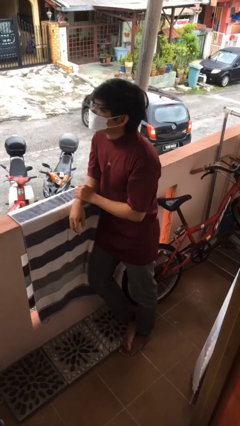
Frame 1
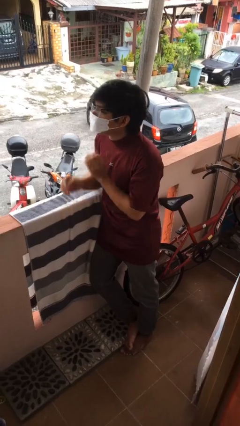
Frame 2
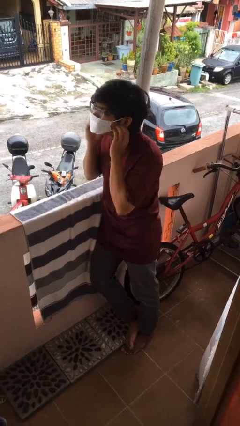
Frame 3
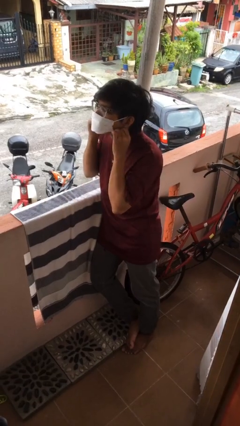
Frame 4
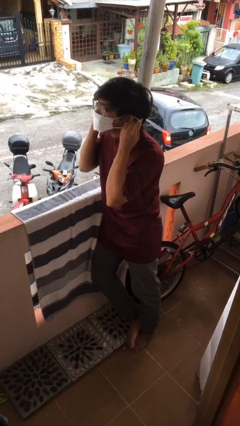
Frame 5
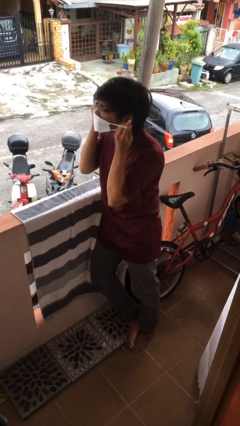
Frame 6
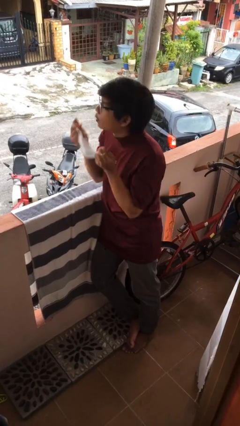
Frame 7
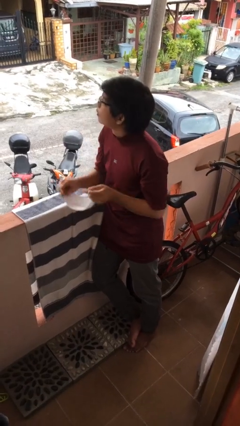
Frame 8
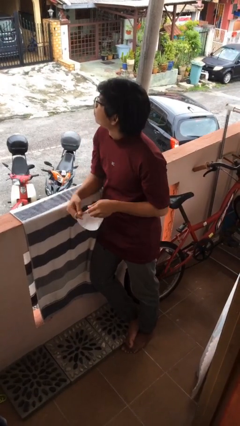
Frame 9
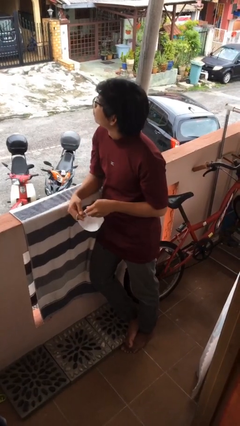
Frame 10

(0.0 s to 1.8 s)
person takes off facemask

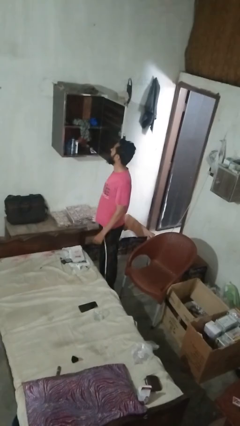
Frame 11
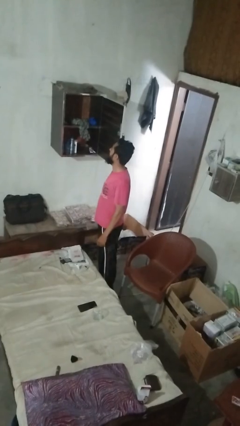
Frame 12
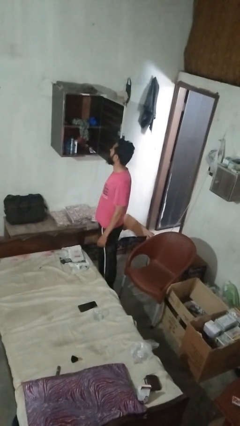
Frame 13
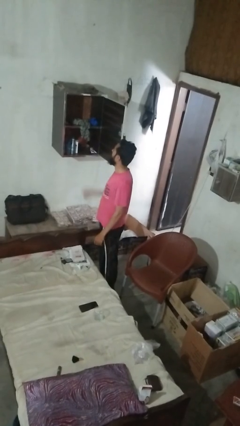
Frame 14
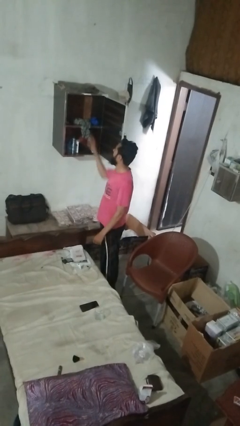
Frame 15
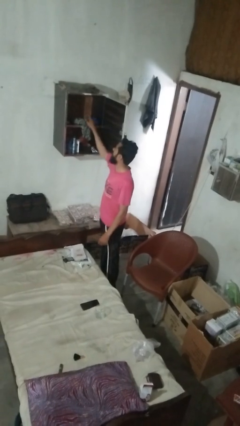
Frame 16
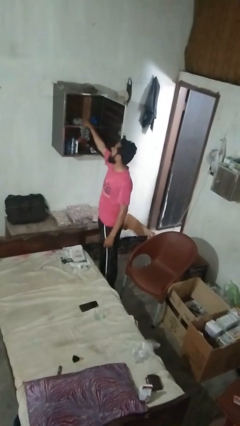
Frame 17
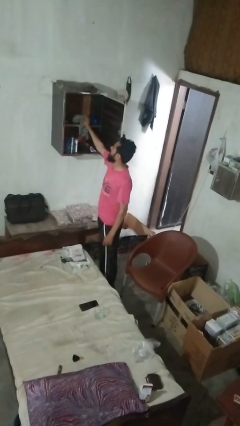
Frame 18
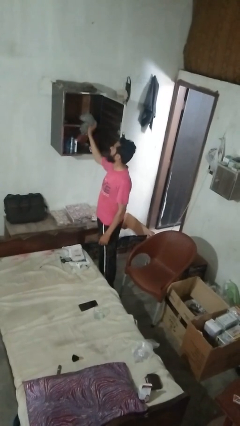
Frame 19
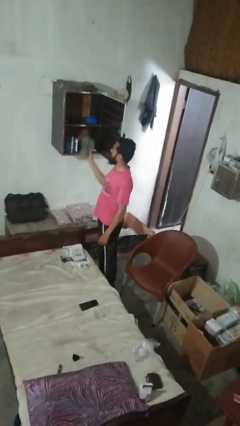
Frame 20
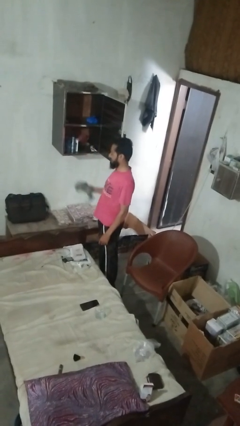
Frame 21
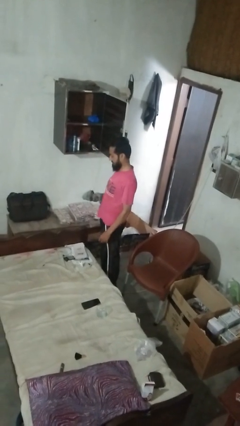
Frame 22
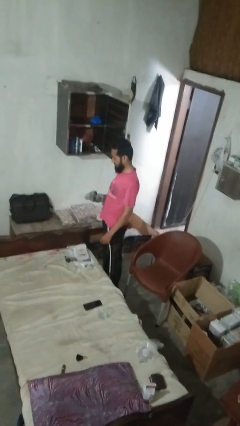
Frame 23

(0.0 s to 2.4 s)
person takes clothes from dresser

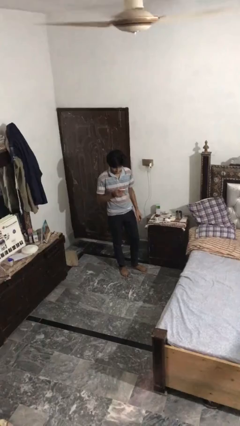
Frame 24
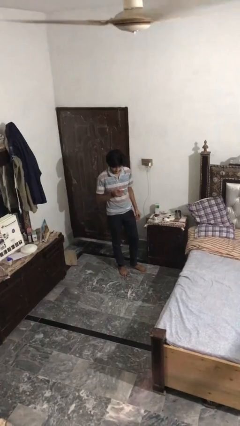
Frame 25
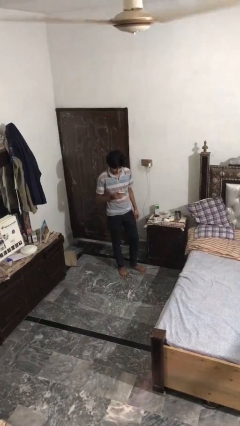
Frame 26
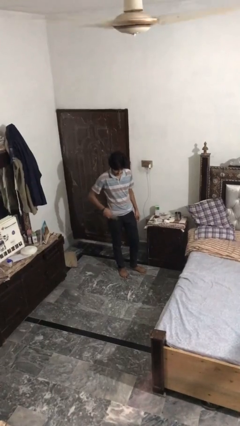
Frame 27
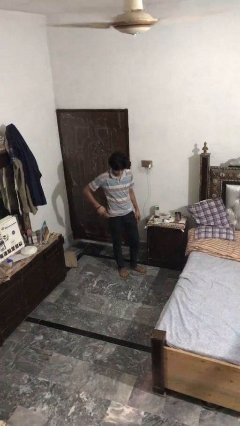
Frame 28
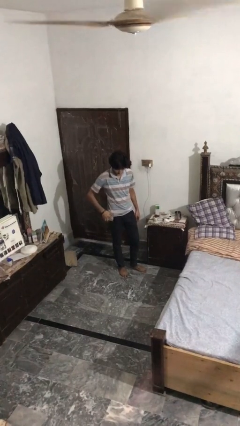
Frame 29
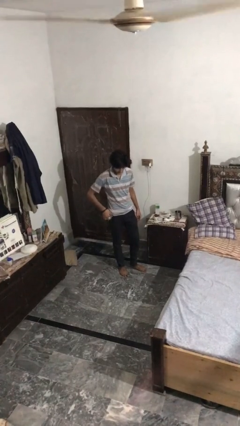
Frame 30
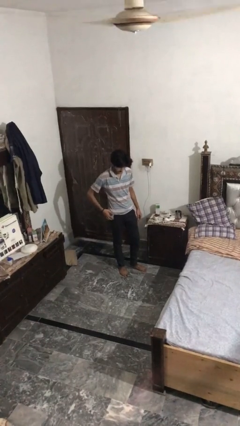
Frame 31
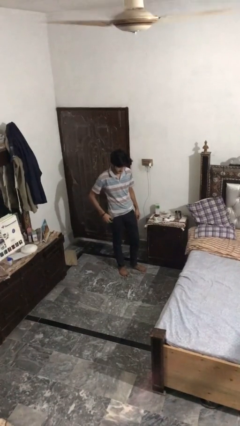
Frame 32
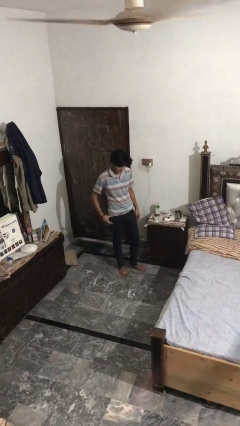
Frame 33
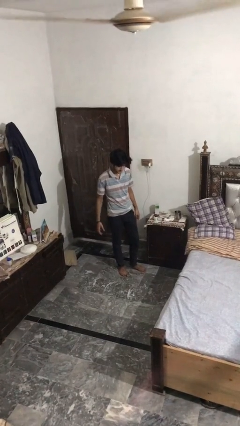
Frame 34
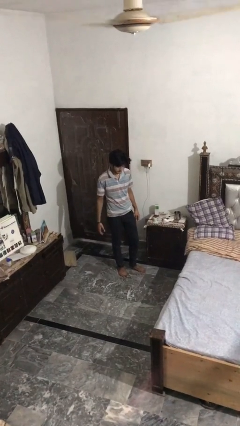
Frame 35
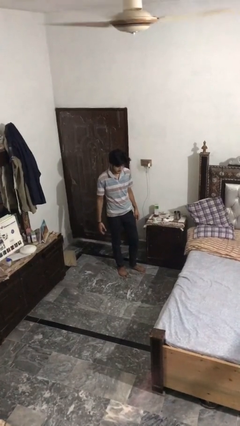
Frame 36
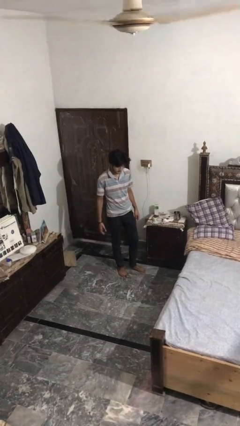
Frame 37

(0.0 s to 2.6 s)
person puts phone into pocket

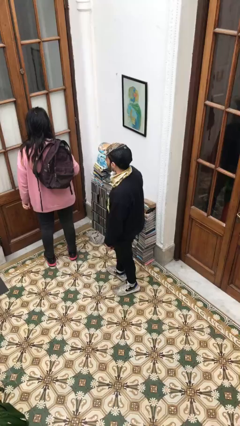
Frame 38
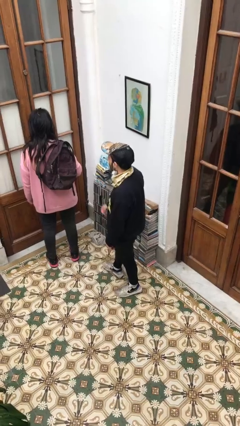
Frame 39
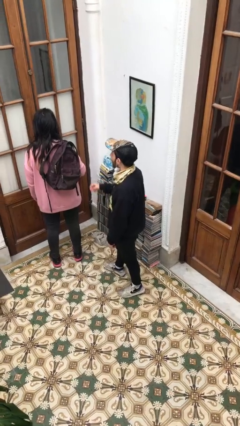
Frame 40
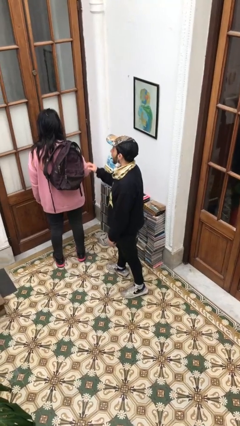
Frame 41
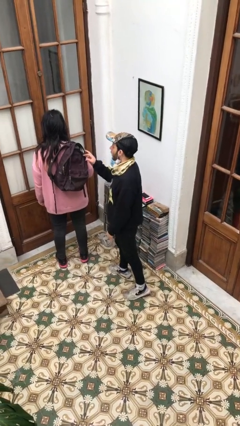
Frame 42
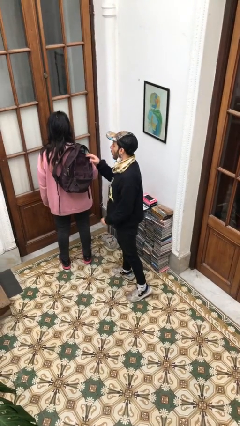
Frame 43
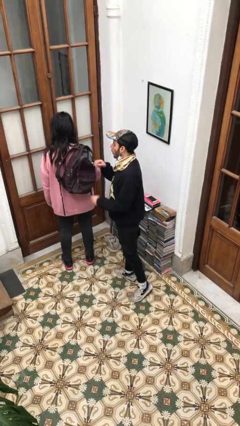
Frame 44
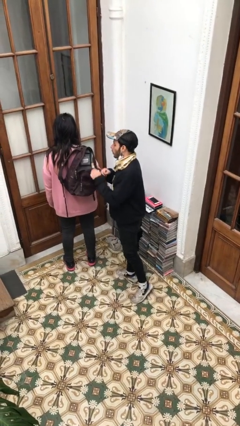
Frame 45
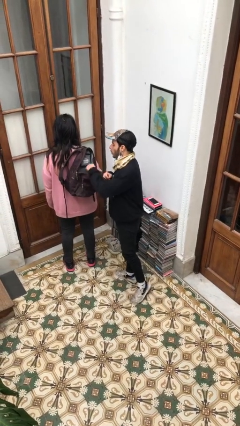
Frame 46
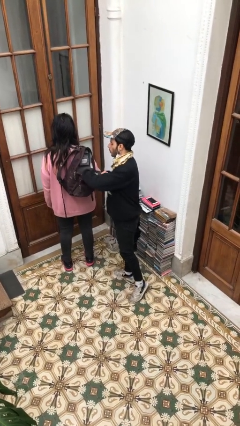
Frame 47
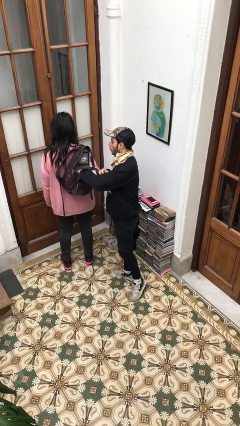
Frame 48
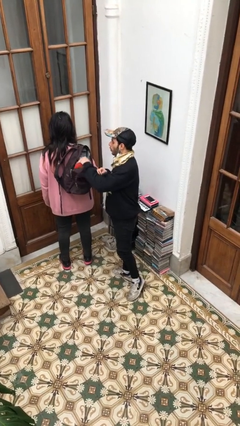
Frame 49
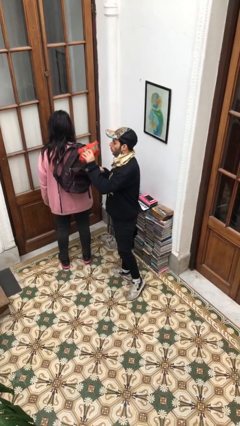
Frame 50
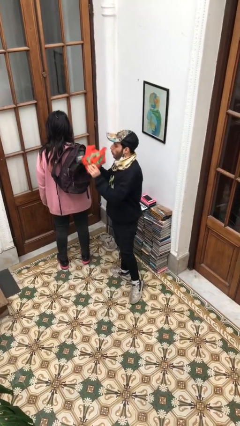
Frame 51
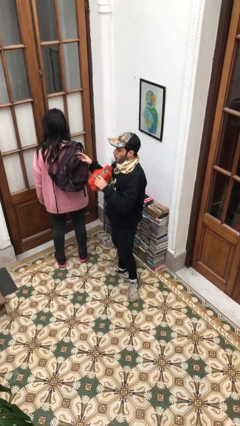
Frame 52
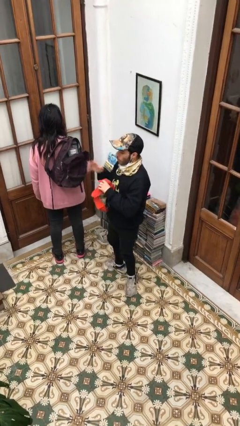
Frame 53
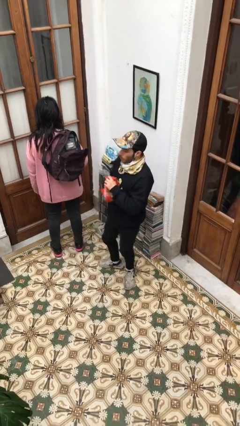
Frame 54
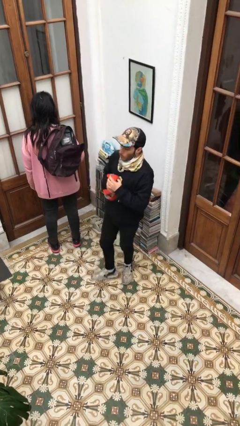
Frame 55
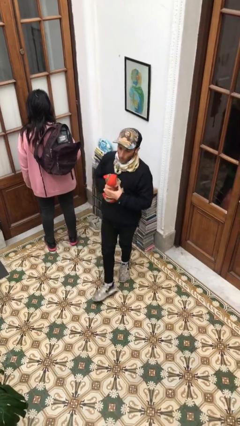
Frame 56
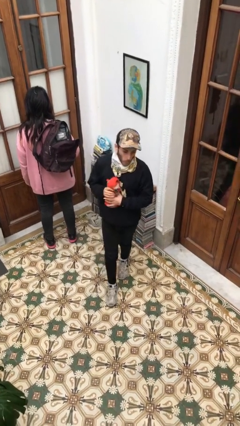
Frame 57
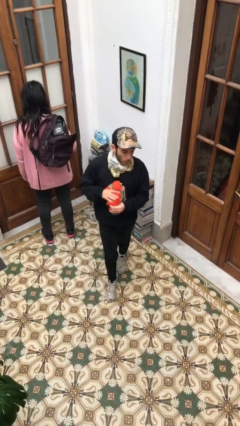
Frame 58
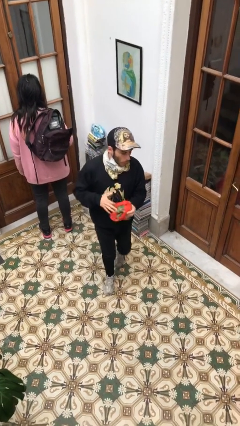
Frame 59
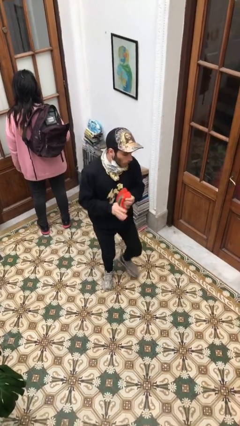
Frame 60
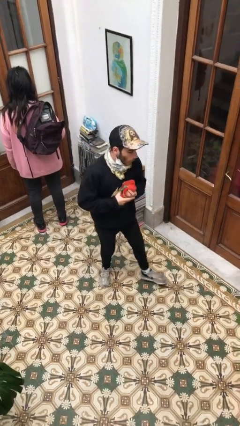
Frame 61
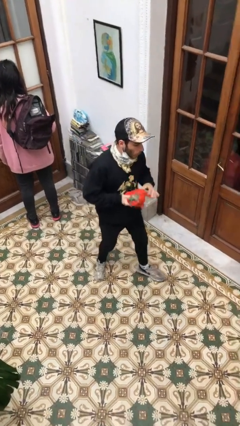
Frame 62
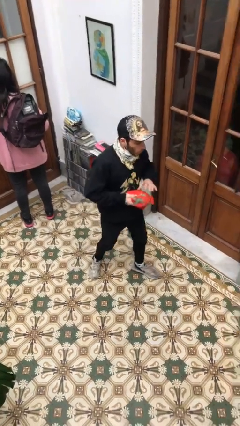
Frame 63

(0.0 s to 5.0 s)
person steals object from person

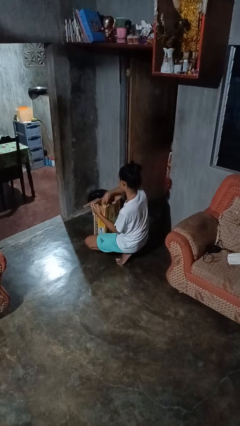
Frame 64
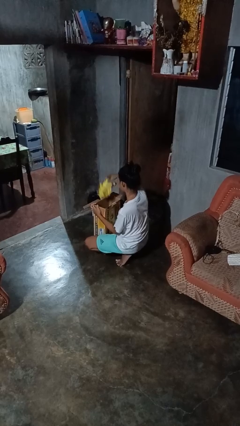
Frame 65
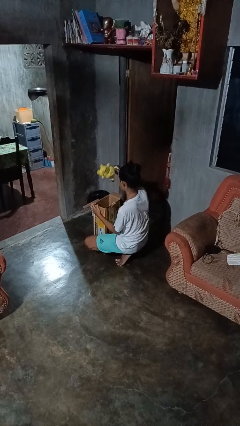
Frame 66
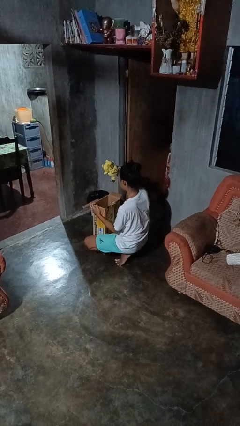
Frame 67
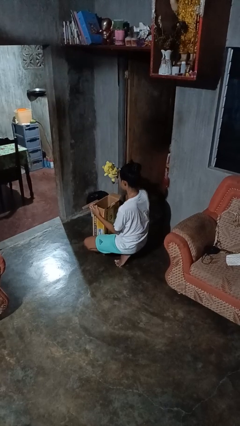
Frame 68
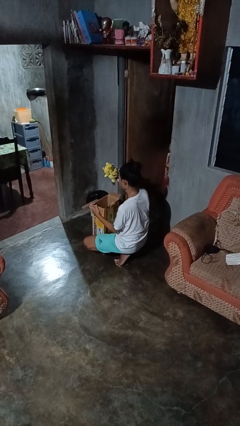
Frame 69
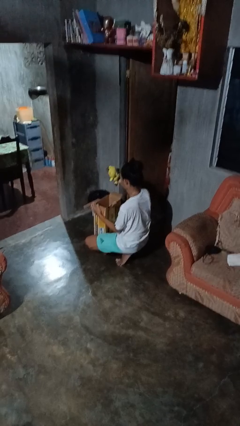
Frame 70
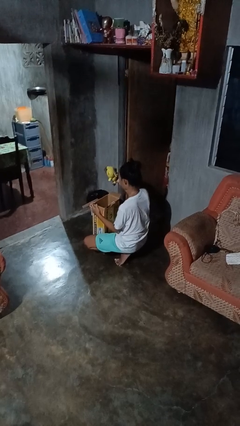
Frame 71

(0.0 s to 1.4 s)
person takes object from box

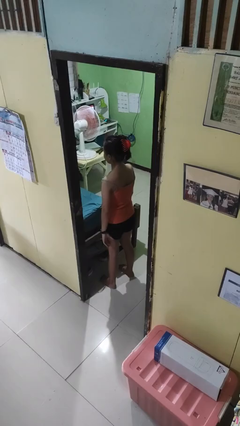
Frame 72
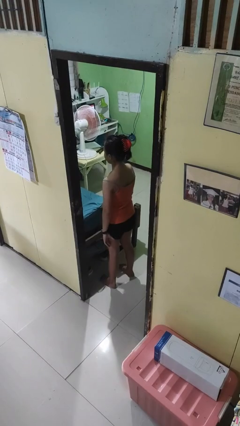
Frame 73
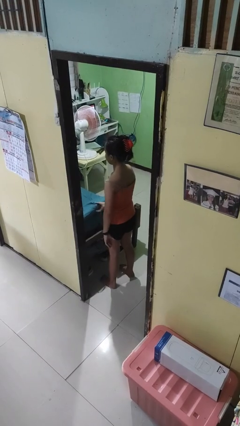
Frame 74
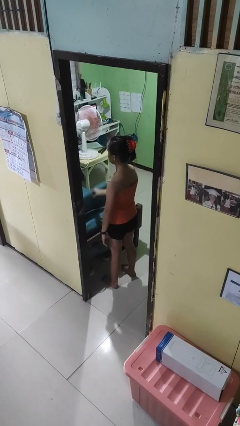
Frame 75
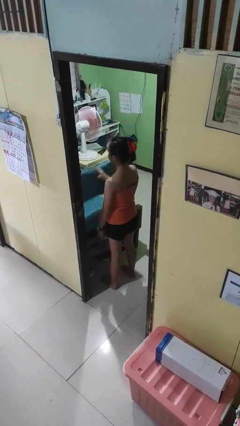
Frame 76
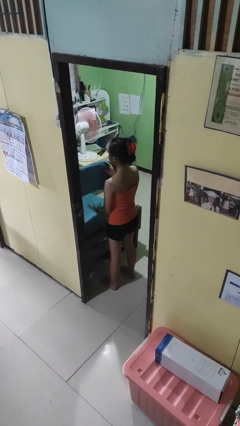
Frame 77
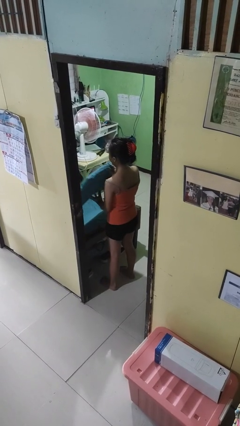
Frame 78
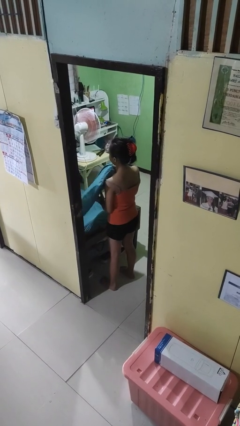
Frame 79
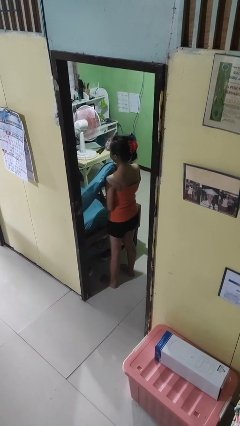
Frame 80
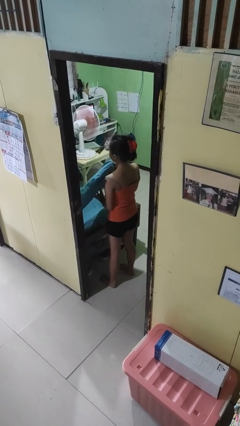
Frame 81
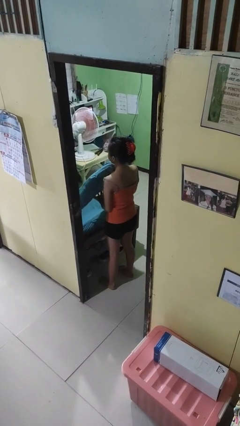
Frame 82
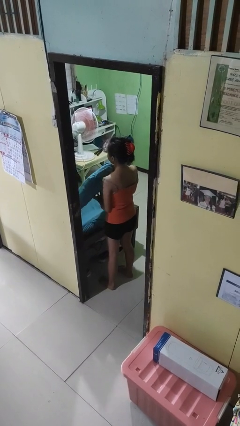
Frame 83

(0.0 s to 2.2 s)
person picks up object from bed

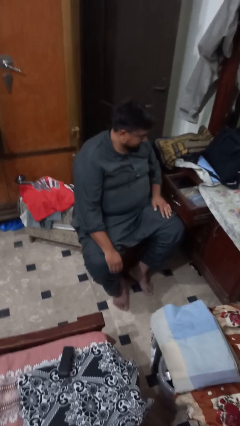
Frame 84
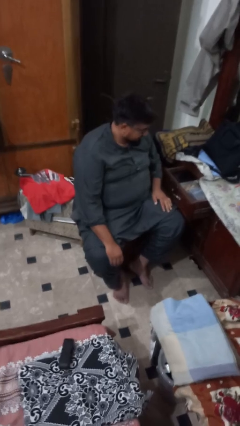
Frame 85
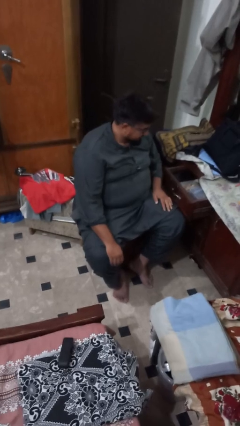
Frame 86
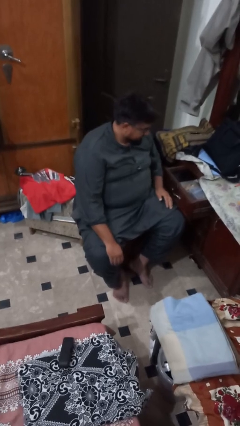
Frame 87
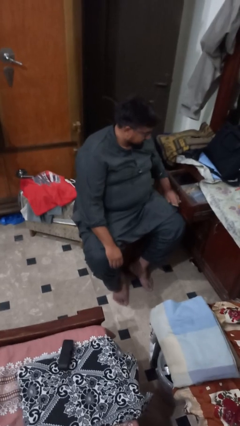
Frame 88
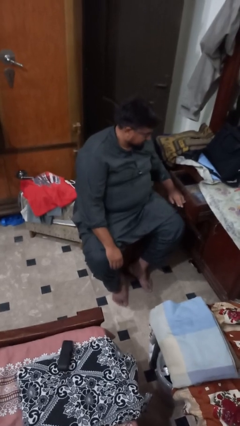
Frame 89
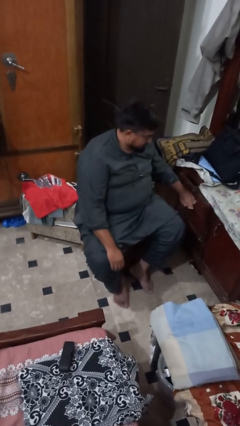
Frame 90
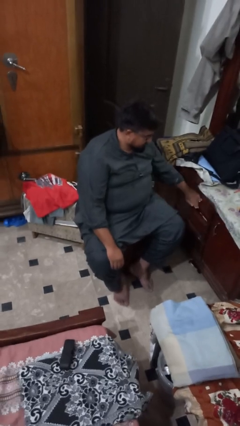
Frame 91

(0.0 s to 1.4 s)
person closes dresser drawer
